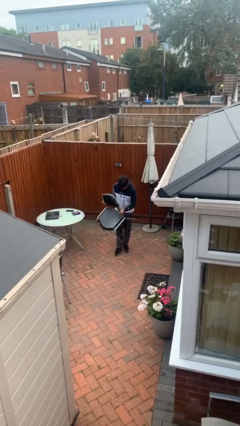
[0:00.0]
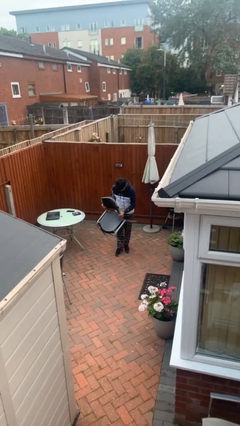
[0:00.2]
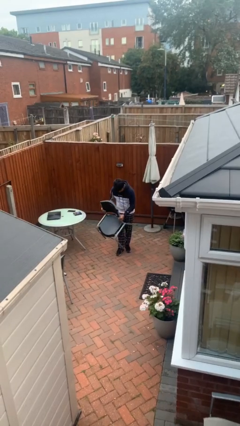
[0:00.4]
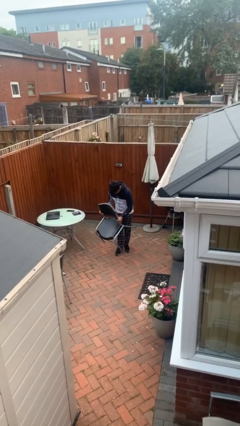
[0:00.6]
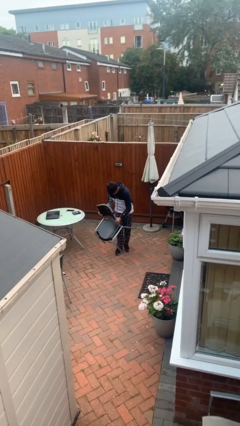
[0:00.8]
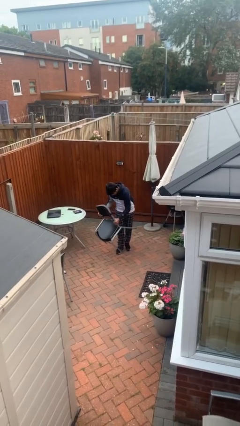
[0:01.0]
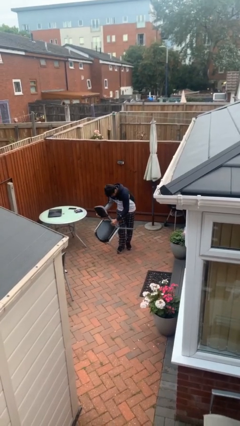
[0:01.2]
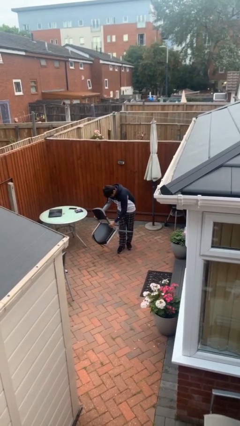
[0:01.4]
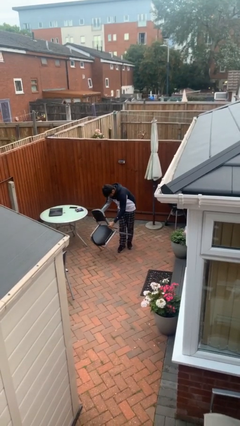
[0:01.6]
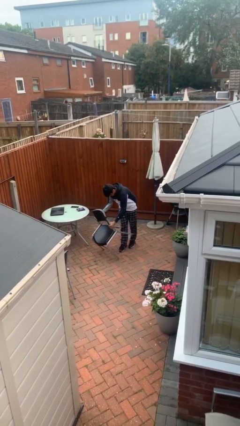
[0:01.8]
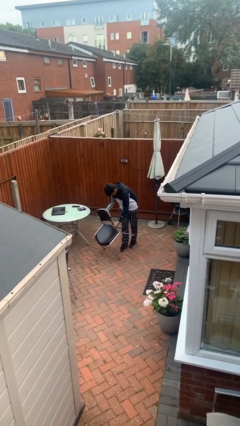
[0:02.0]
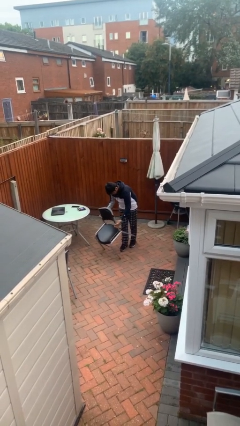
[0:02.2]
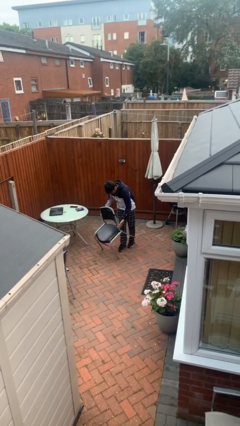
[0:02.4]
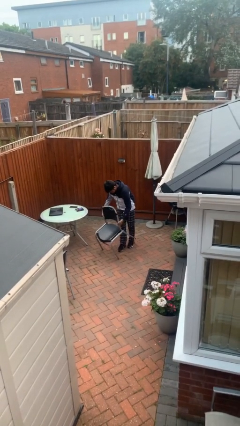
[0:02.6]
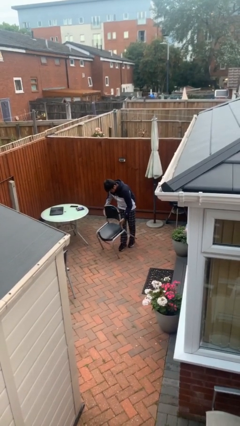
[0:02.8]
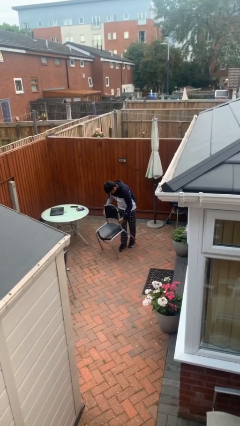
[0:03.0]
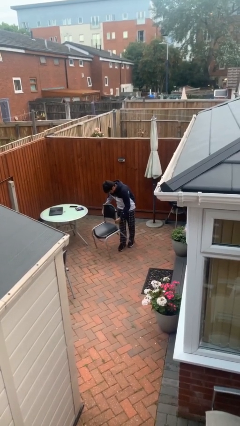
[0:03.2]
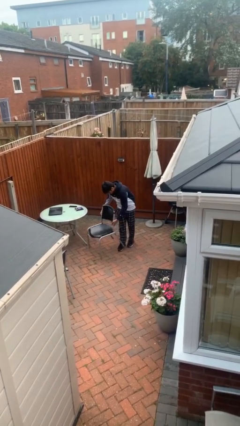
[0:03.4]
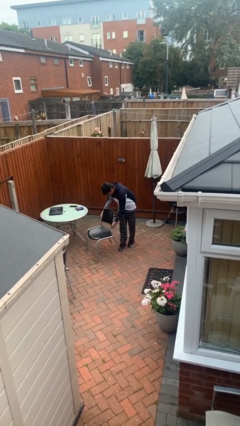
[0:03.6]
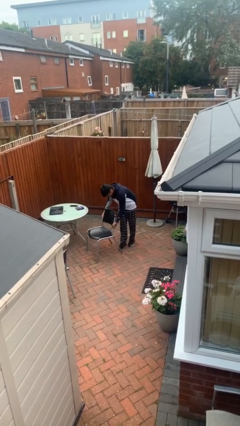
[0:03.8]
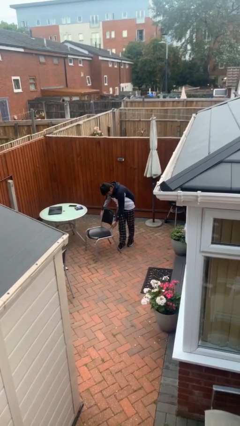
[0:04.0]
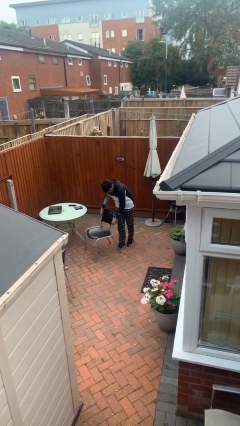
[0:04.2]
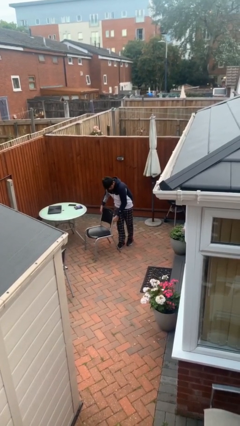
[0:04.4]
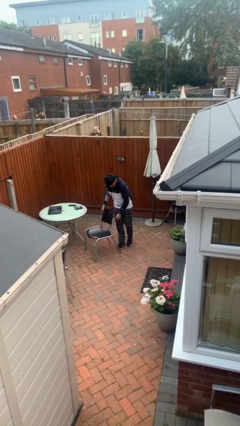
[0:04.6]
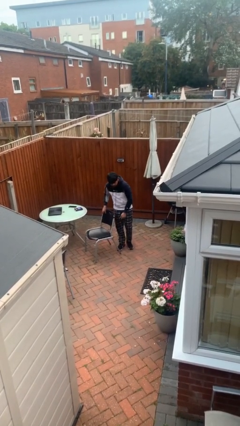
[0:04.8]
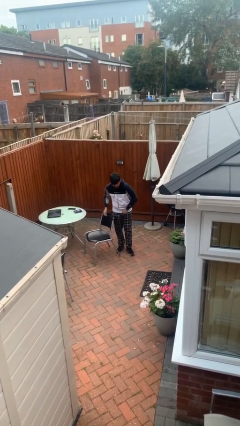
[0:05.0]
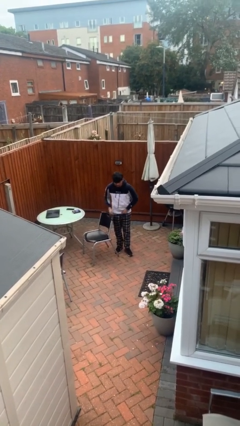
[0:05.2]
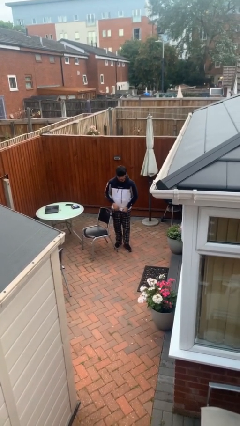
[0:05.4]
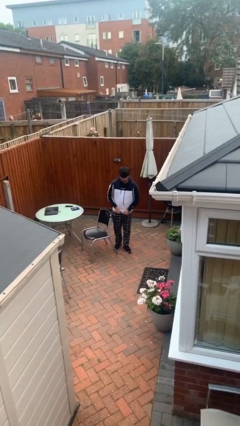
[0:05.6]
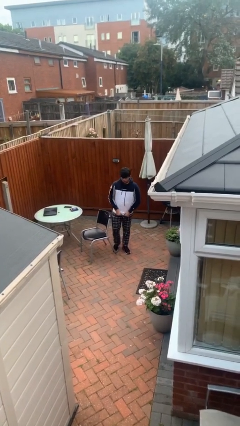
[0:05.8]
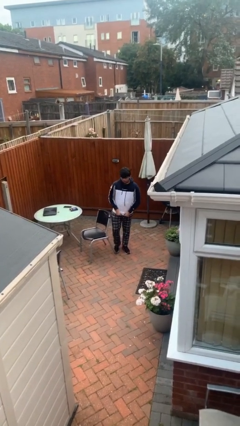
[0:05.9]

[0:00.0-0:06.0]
person puts down object on floor

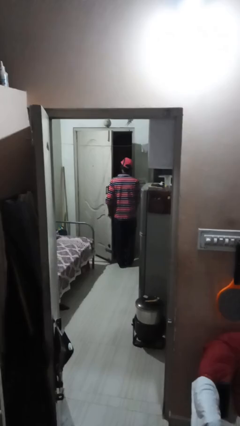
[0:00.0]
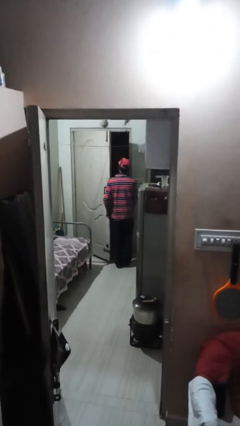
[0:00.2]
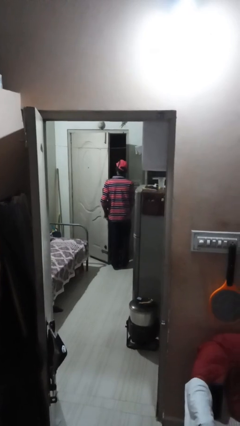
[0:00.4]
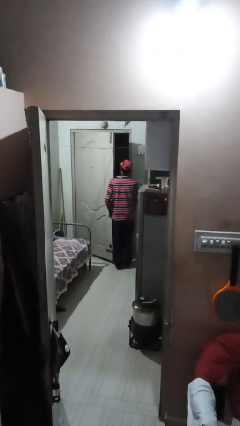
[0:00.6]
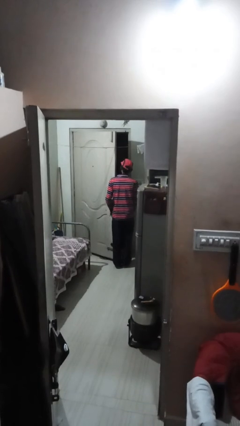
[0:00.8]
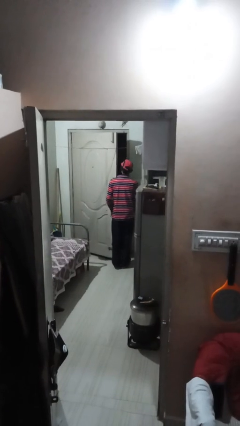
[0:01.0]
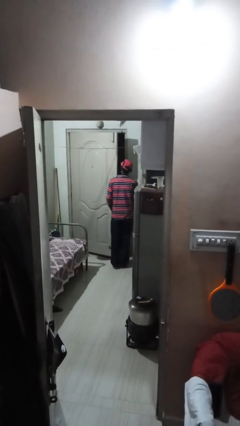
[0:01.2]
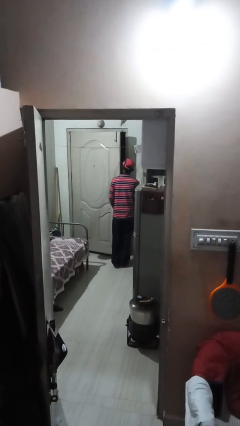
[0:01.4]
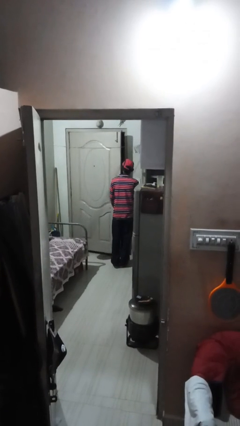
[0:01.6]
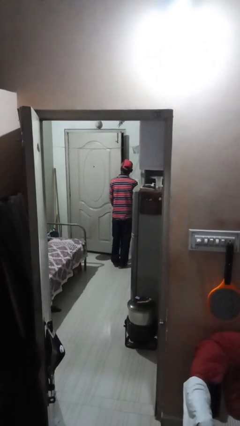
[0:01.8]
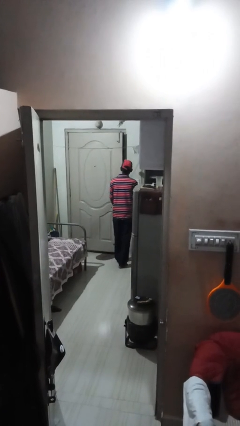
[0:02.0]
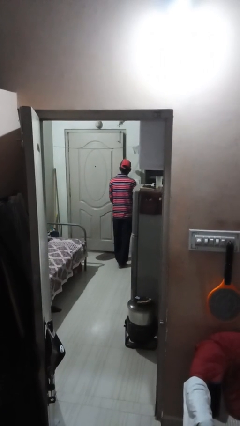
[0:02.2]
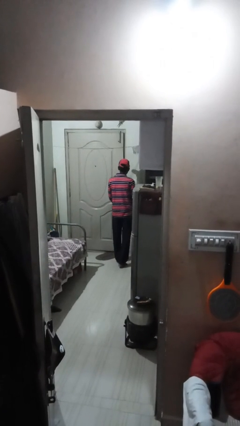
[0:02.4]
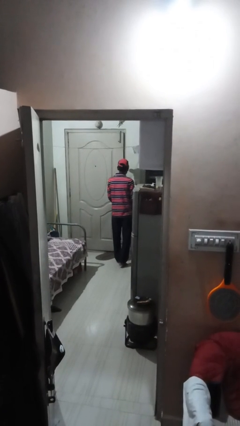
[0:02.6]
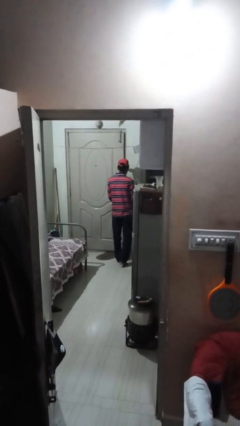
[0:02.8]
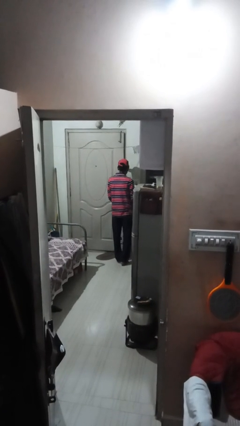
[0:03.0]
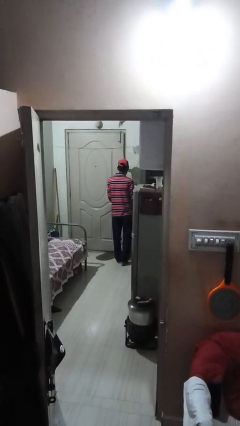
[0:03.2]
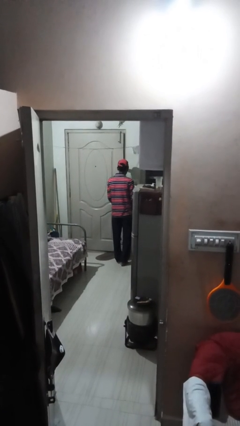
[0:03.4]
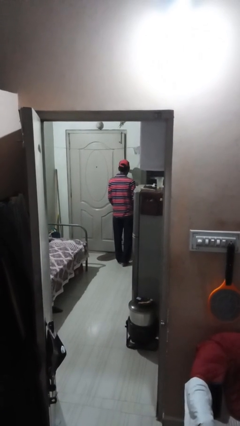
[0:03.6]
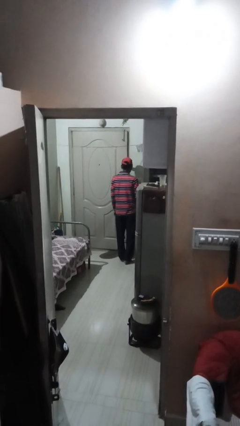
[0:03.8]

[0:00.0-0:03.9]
person closes facility door

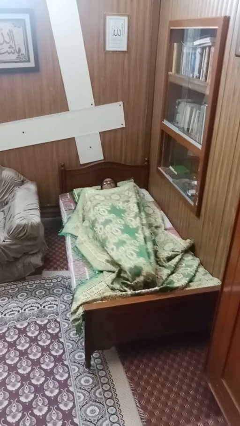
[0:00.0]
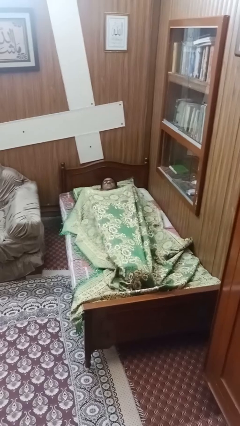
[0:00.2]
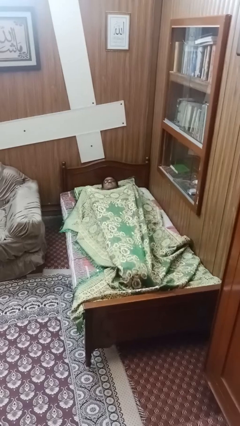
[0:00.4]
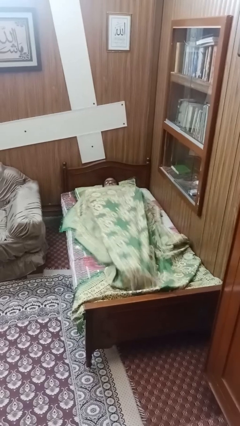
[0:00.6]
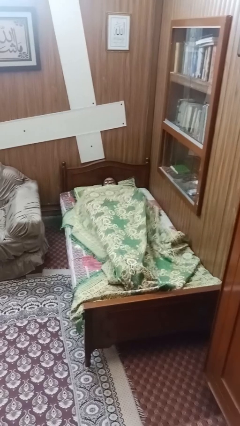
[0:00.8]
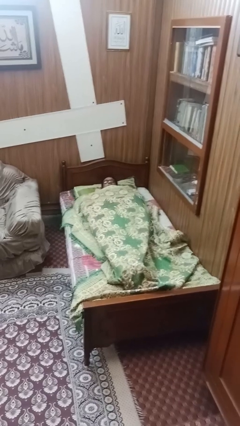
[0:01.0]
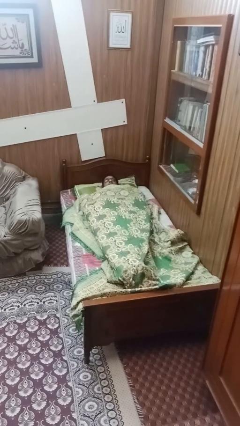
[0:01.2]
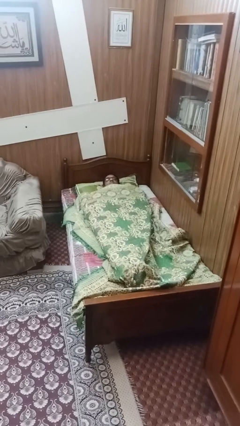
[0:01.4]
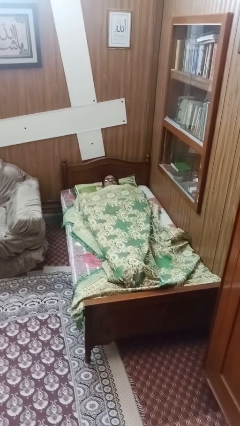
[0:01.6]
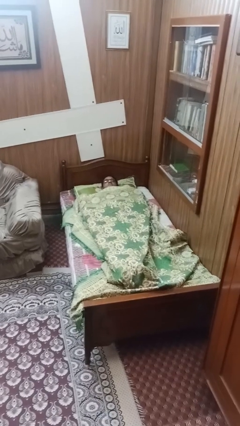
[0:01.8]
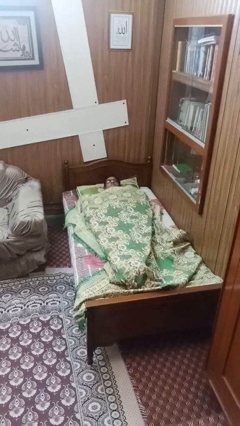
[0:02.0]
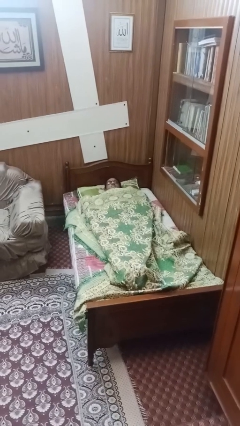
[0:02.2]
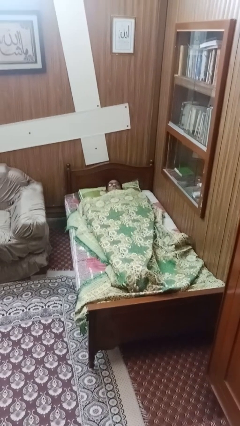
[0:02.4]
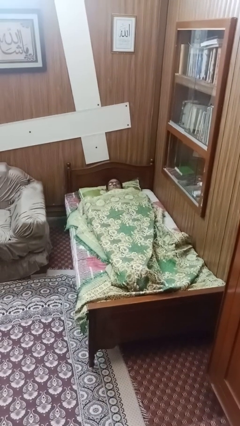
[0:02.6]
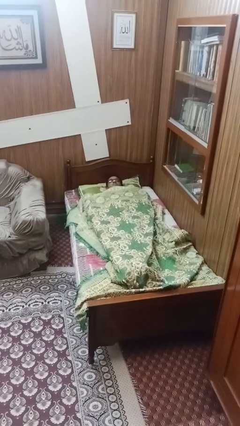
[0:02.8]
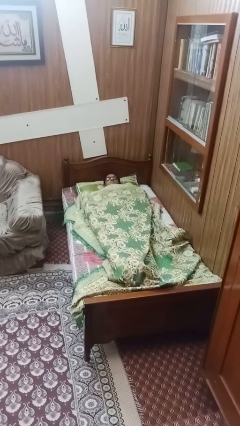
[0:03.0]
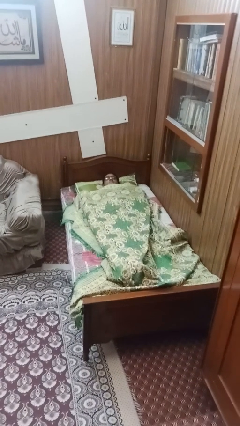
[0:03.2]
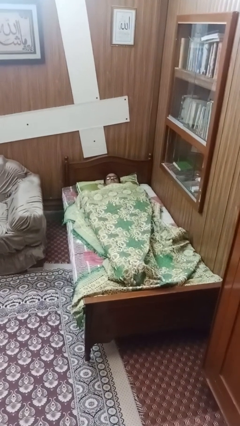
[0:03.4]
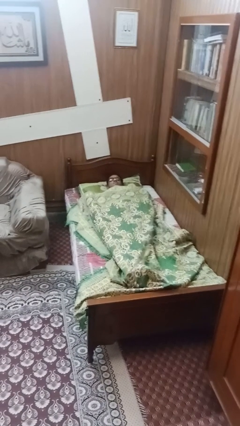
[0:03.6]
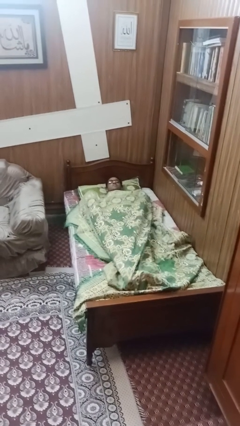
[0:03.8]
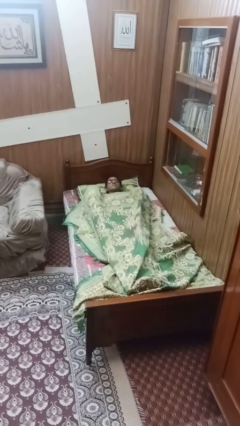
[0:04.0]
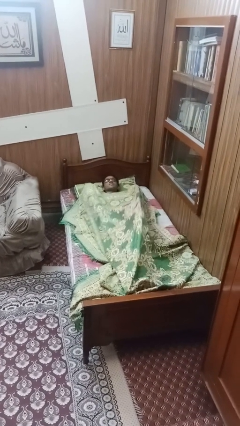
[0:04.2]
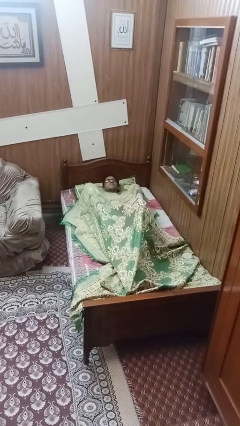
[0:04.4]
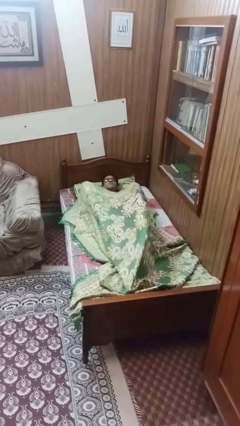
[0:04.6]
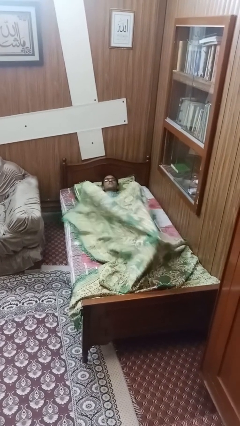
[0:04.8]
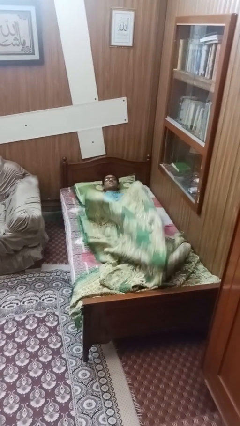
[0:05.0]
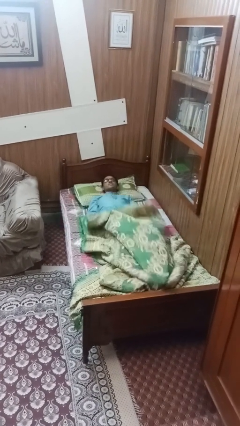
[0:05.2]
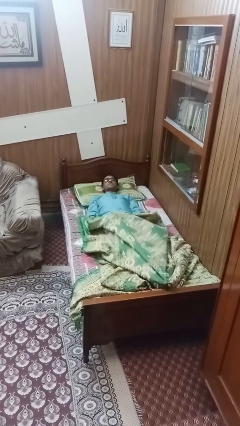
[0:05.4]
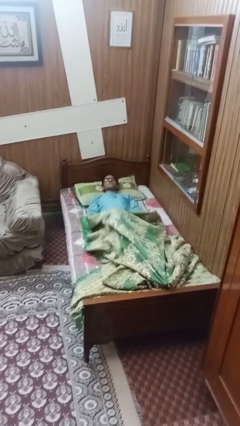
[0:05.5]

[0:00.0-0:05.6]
person covers with bedsheets

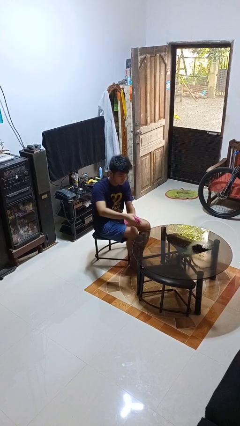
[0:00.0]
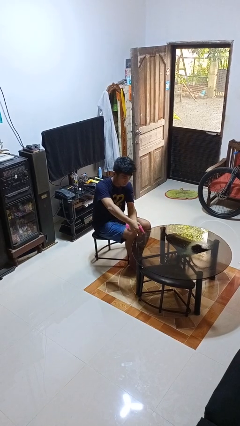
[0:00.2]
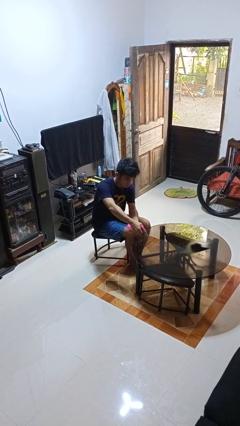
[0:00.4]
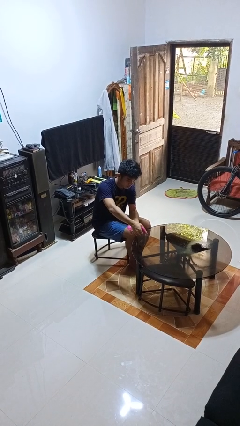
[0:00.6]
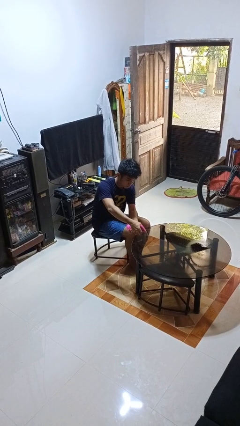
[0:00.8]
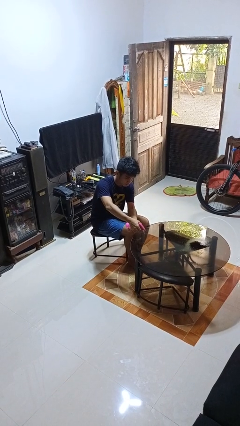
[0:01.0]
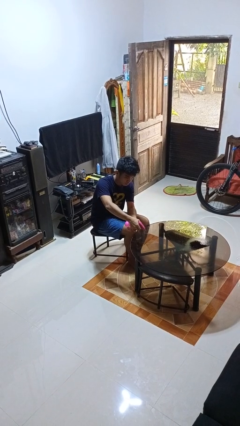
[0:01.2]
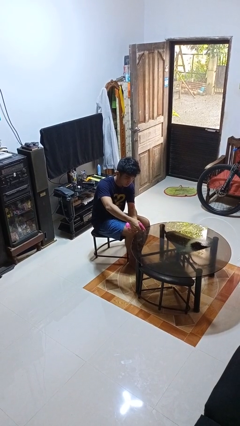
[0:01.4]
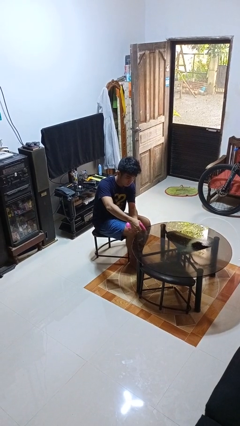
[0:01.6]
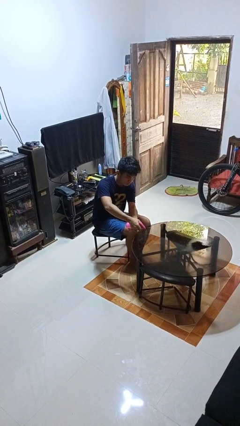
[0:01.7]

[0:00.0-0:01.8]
person sprays from bottle

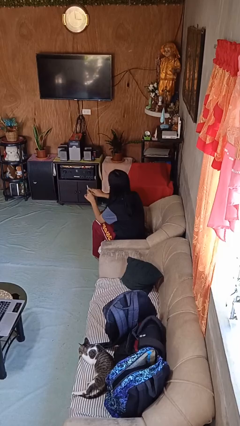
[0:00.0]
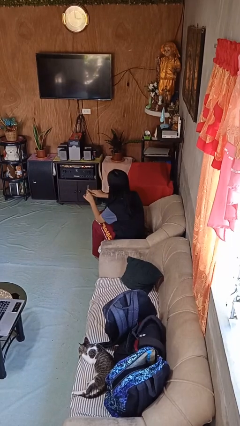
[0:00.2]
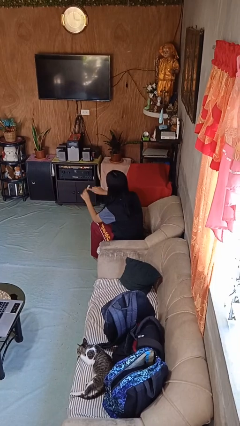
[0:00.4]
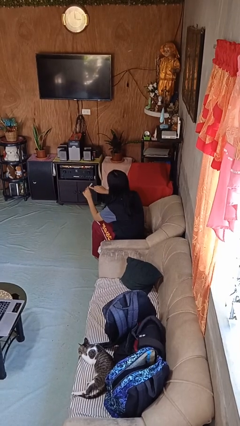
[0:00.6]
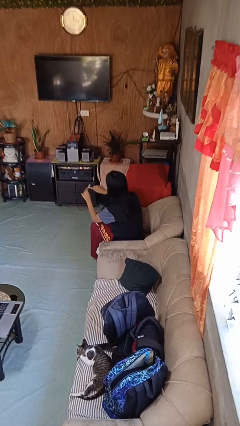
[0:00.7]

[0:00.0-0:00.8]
person files fingernails
